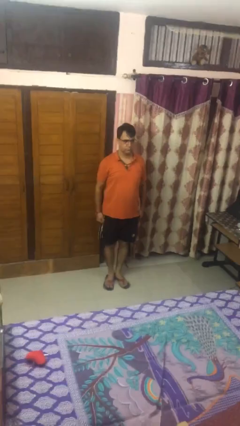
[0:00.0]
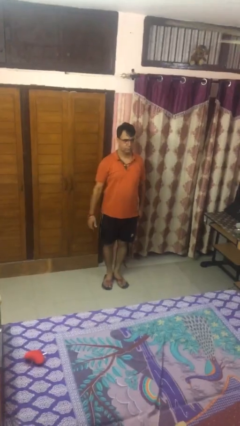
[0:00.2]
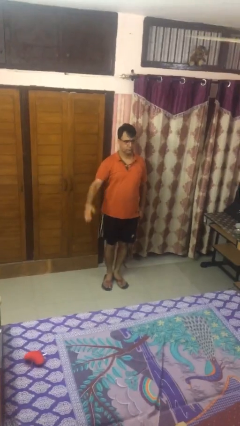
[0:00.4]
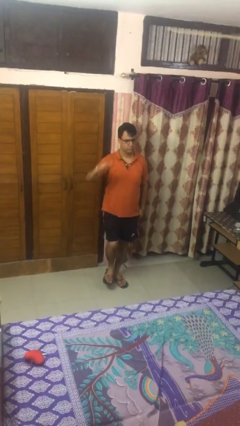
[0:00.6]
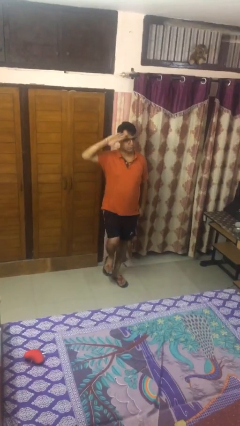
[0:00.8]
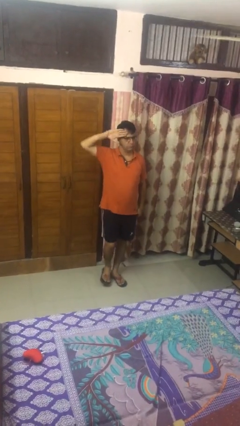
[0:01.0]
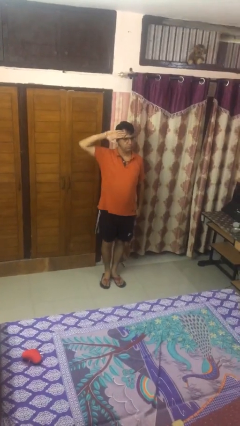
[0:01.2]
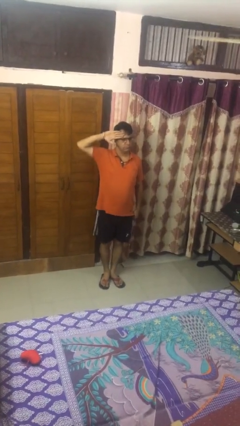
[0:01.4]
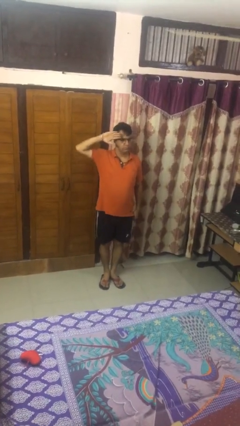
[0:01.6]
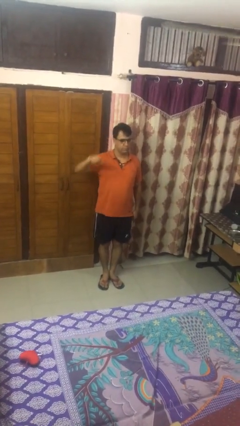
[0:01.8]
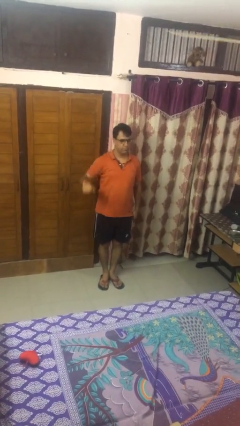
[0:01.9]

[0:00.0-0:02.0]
person salutes

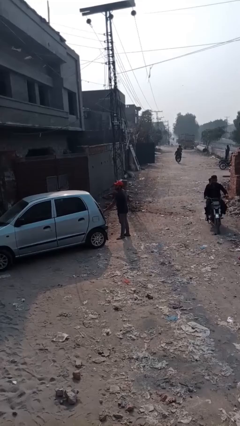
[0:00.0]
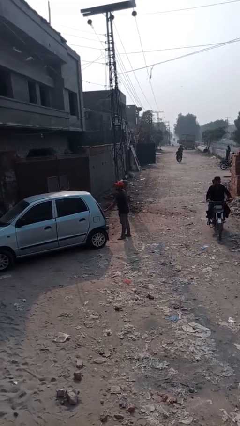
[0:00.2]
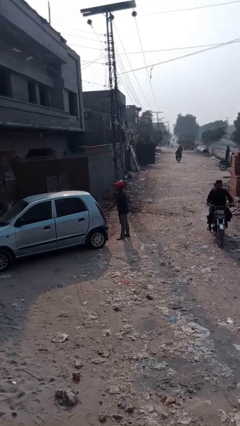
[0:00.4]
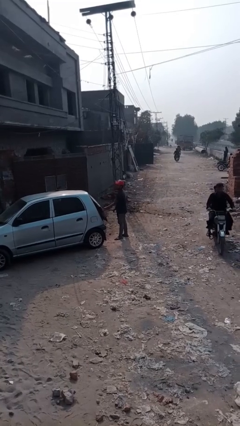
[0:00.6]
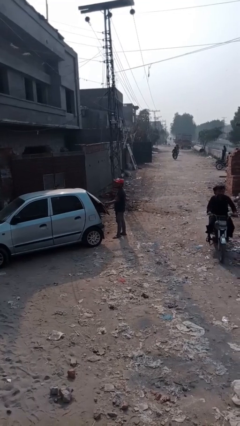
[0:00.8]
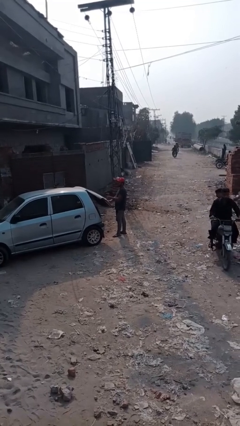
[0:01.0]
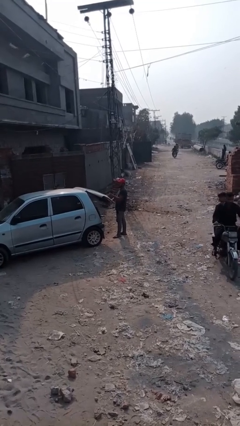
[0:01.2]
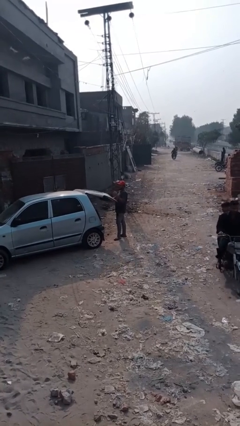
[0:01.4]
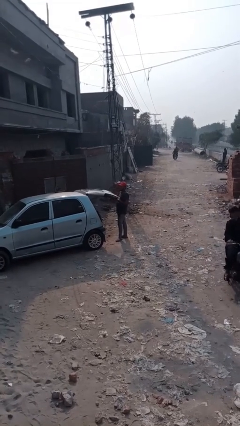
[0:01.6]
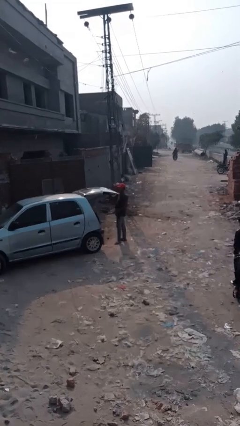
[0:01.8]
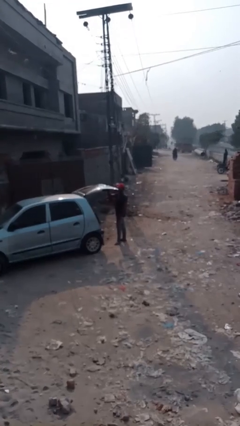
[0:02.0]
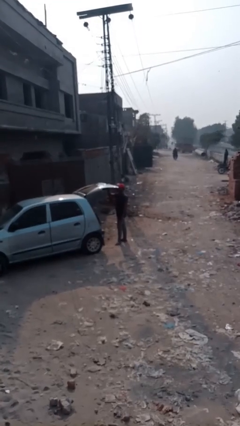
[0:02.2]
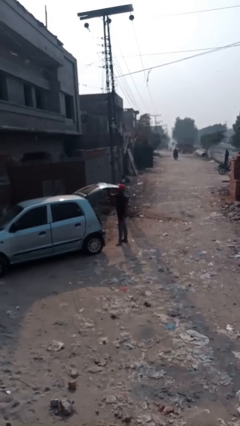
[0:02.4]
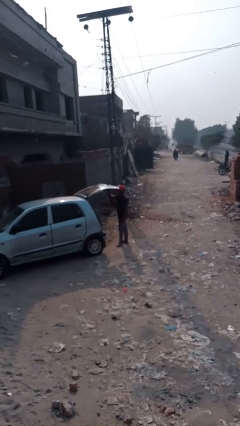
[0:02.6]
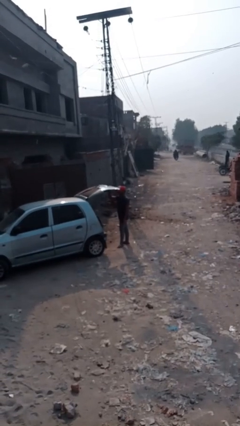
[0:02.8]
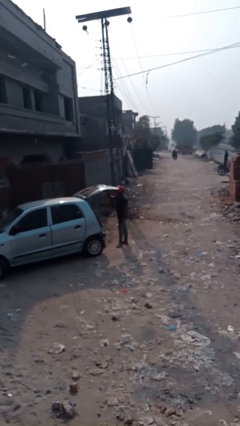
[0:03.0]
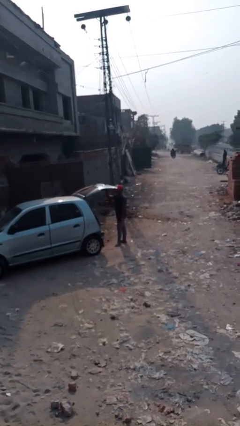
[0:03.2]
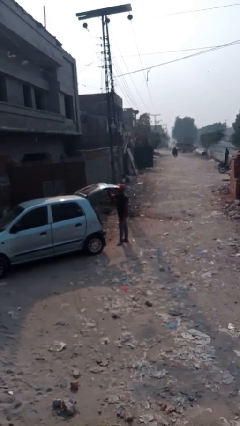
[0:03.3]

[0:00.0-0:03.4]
person opens car trunk

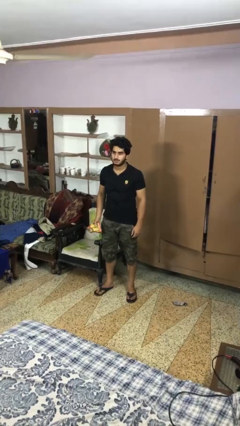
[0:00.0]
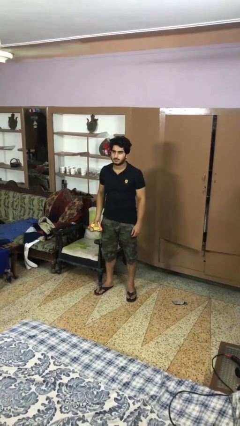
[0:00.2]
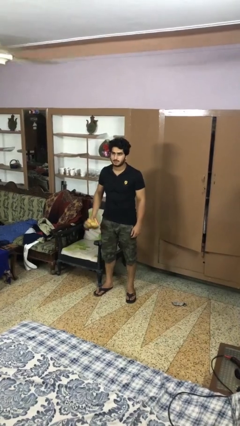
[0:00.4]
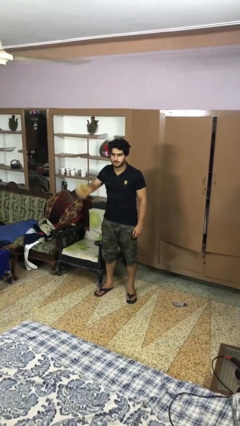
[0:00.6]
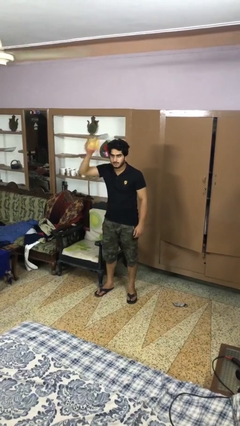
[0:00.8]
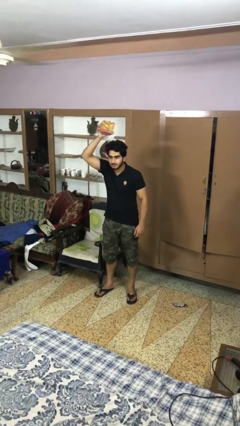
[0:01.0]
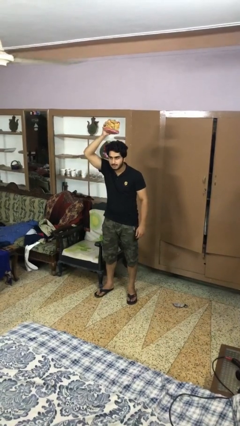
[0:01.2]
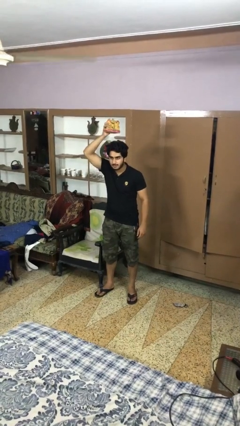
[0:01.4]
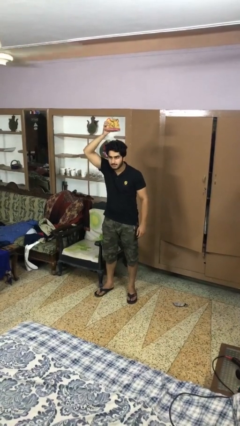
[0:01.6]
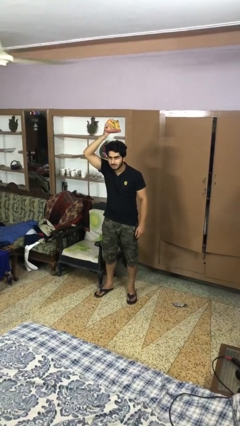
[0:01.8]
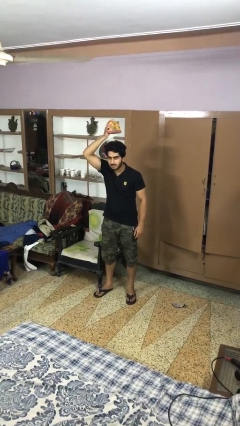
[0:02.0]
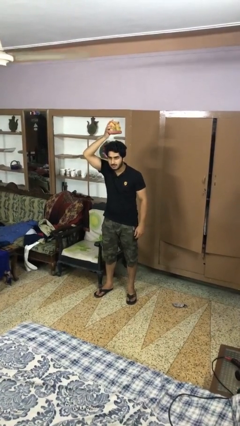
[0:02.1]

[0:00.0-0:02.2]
person holds object above head

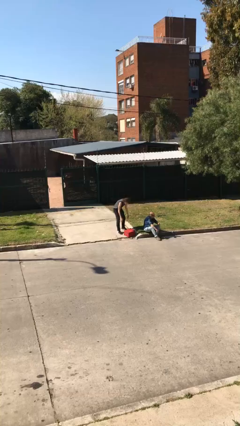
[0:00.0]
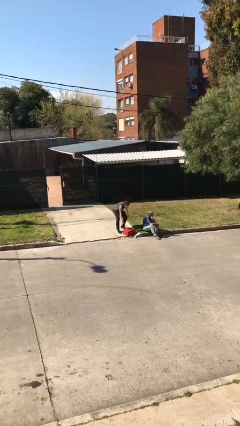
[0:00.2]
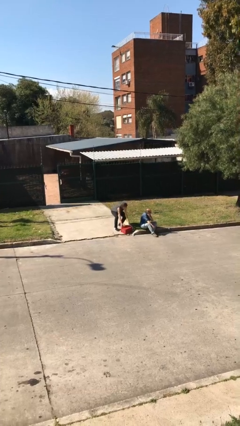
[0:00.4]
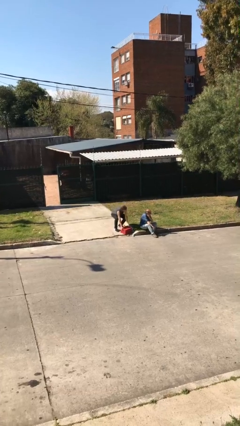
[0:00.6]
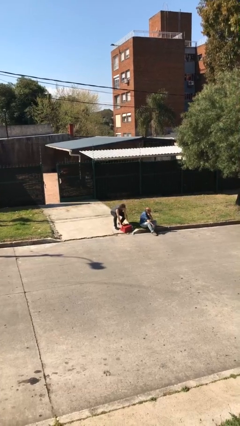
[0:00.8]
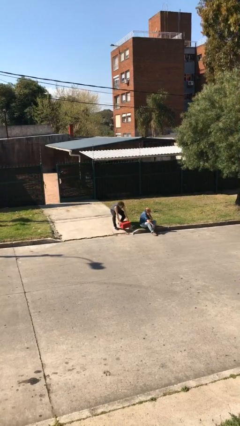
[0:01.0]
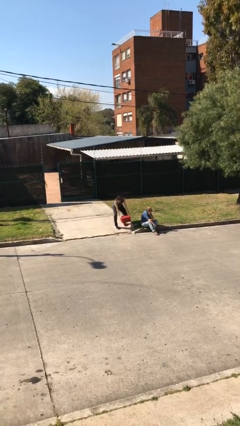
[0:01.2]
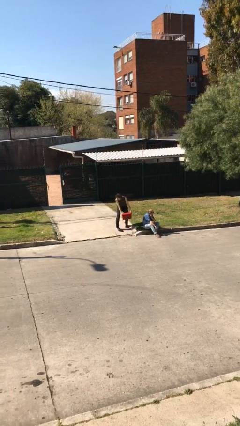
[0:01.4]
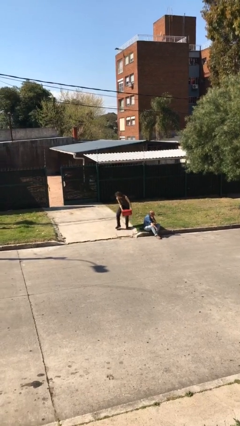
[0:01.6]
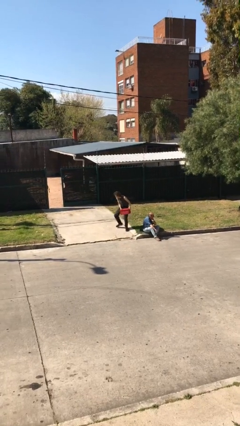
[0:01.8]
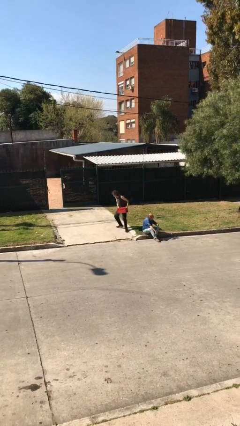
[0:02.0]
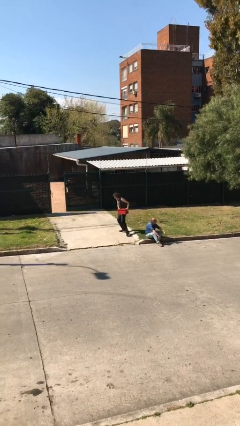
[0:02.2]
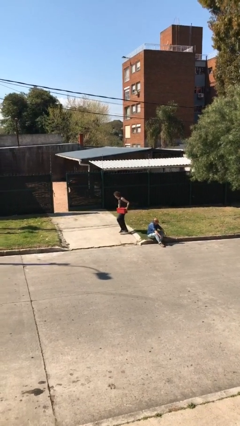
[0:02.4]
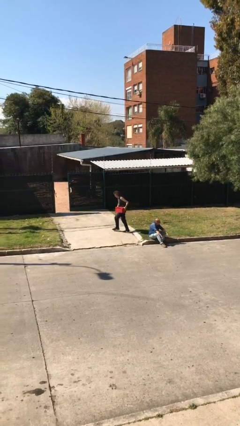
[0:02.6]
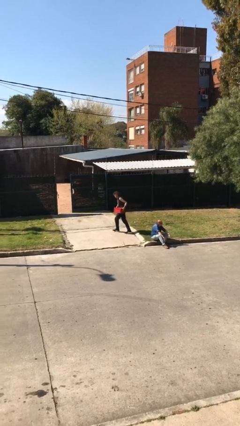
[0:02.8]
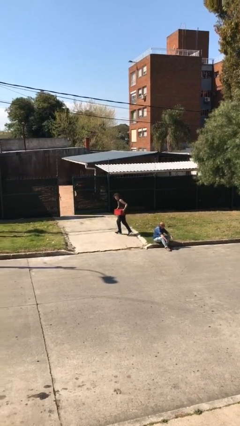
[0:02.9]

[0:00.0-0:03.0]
person steals object from person

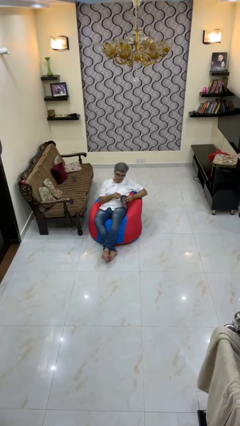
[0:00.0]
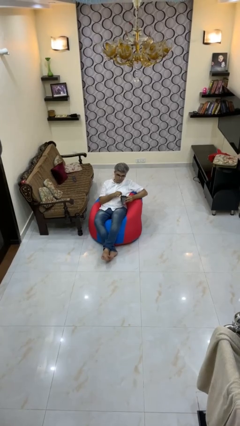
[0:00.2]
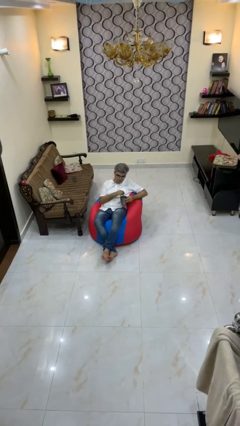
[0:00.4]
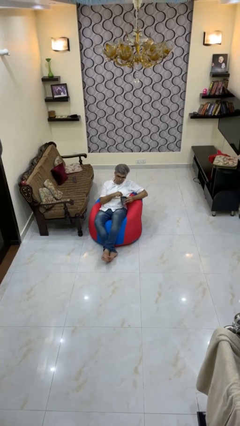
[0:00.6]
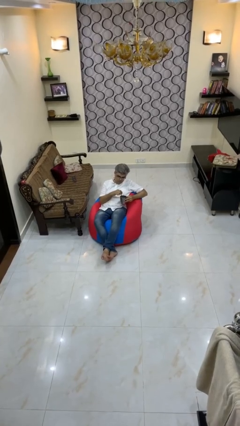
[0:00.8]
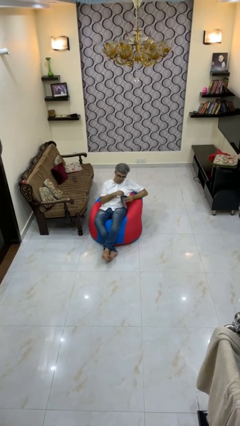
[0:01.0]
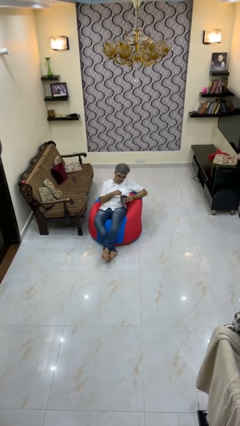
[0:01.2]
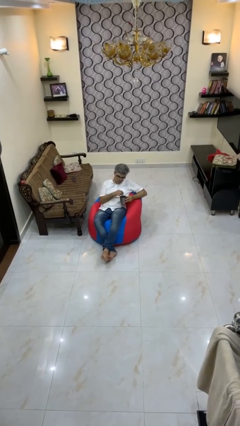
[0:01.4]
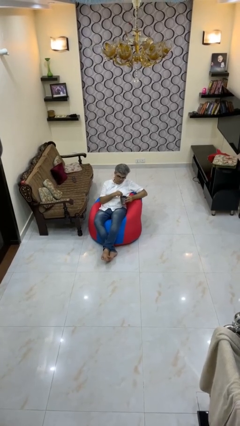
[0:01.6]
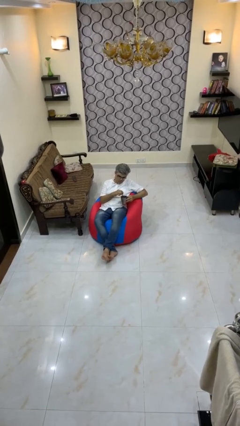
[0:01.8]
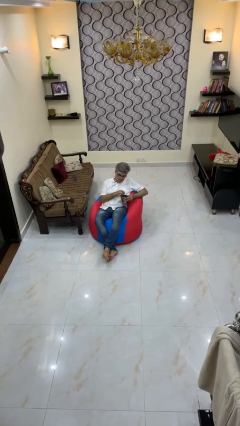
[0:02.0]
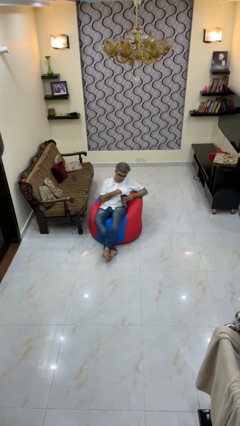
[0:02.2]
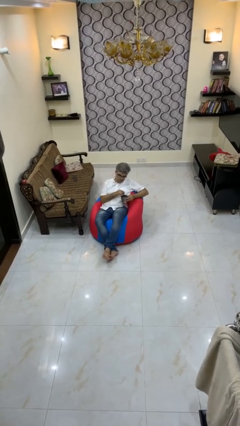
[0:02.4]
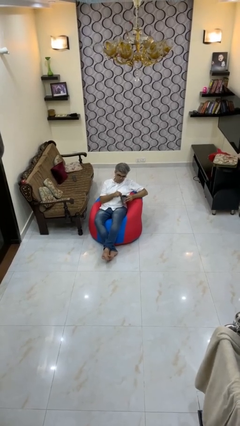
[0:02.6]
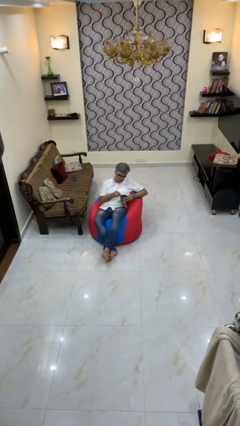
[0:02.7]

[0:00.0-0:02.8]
person stirs mug

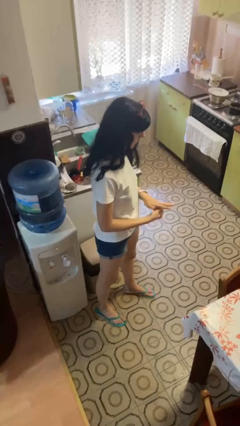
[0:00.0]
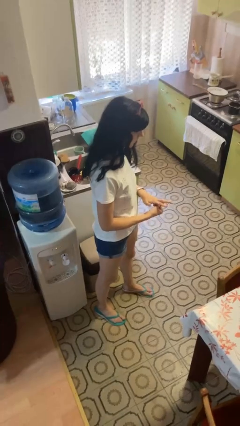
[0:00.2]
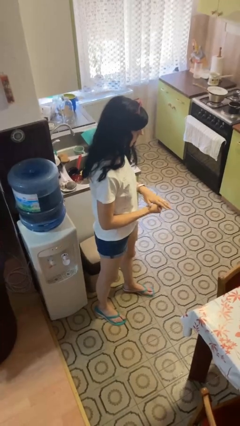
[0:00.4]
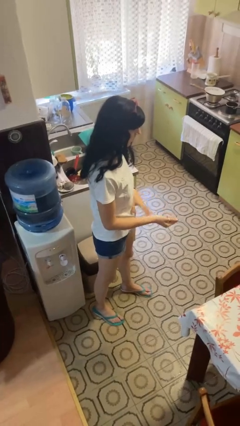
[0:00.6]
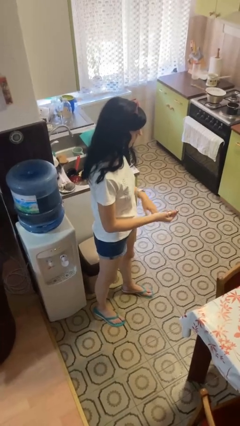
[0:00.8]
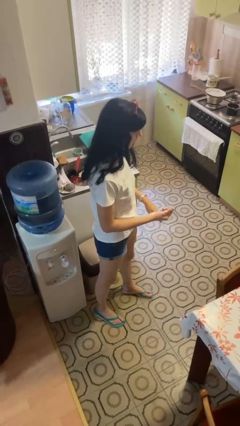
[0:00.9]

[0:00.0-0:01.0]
person takes off ring

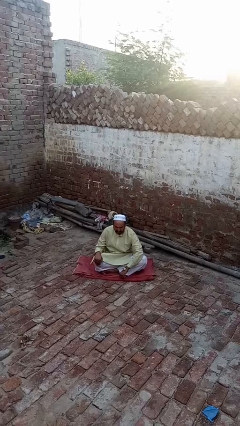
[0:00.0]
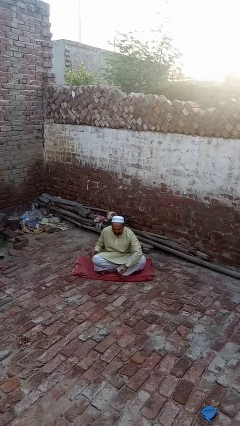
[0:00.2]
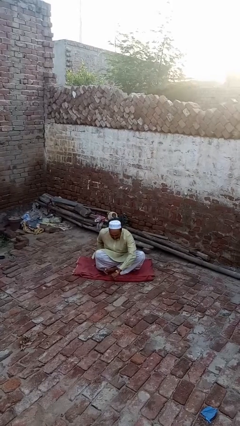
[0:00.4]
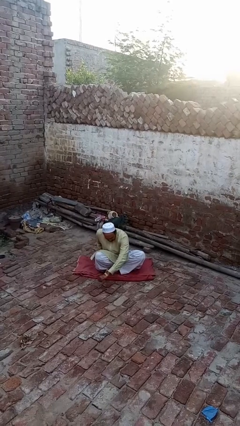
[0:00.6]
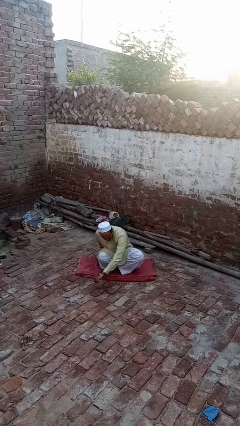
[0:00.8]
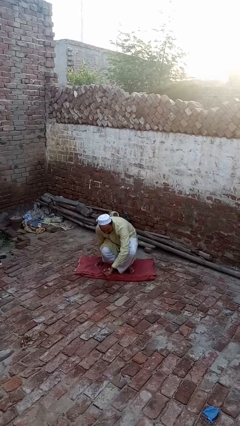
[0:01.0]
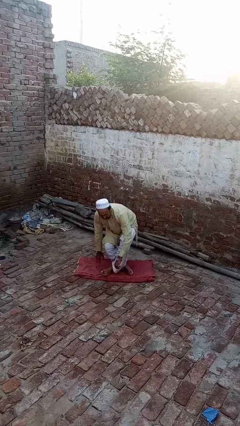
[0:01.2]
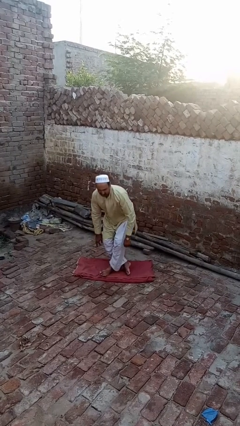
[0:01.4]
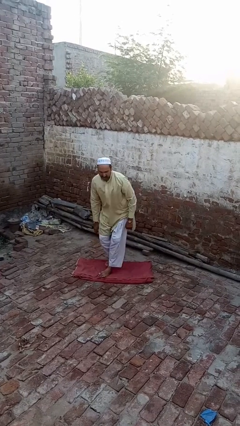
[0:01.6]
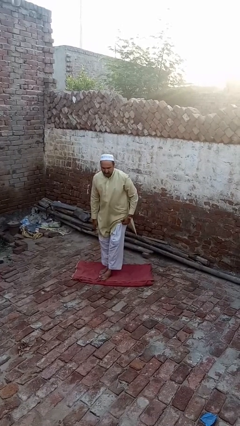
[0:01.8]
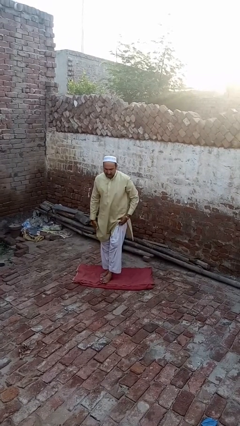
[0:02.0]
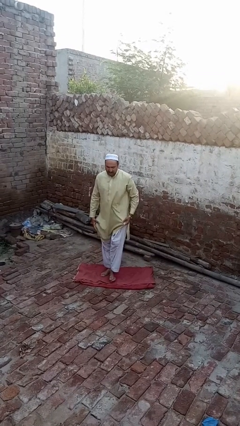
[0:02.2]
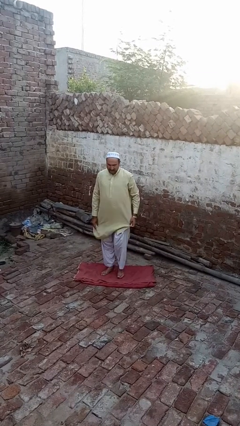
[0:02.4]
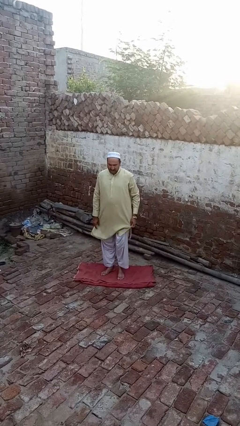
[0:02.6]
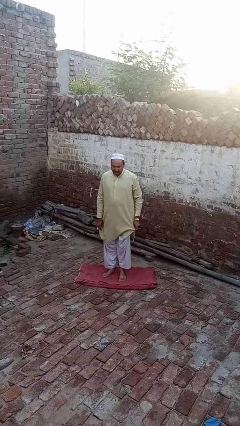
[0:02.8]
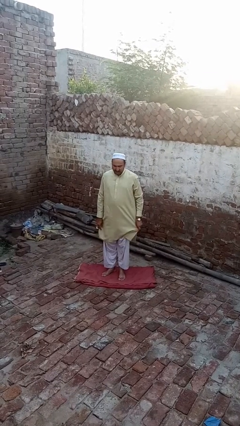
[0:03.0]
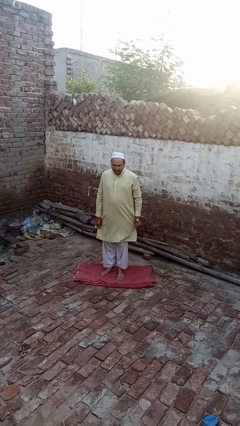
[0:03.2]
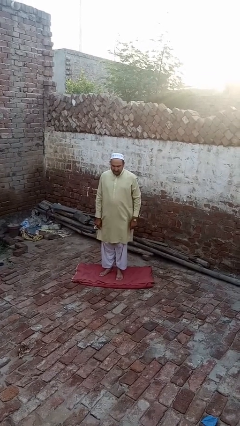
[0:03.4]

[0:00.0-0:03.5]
person stands up from floor
